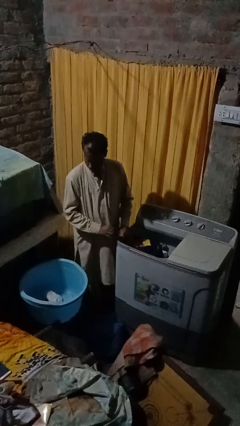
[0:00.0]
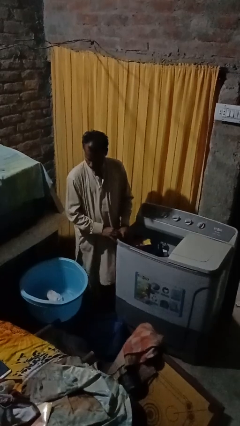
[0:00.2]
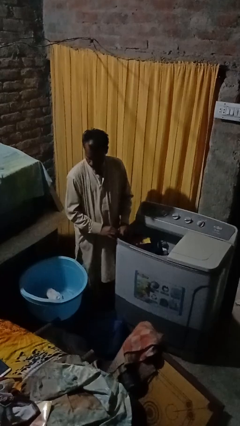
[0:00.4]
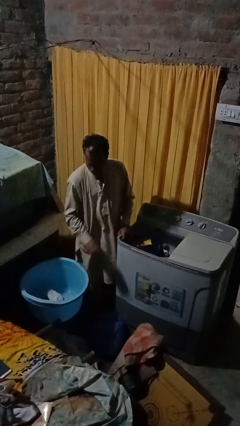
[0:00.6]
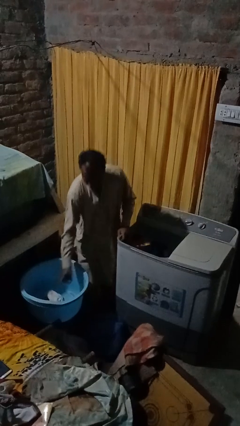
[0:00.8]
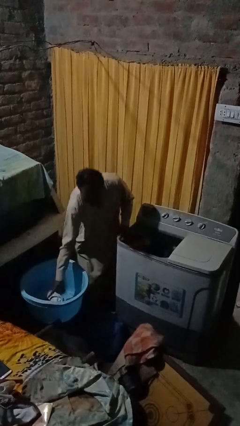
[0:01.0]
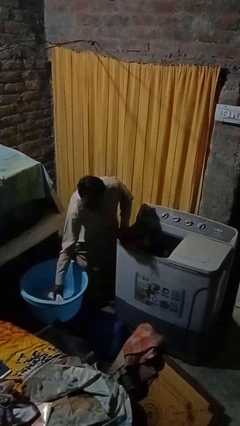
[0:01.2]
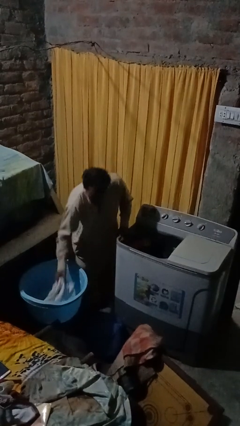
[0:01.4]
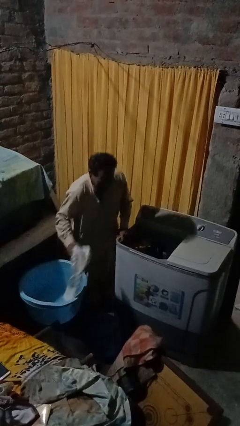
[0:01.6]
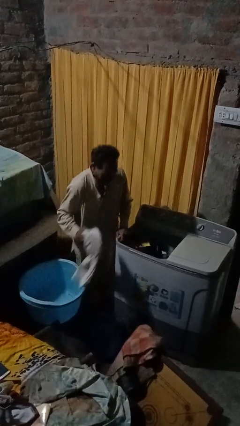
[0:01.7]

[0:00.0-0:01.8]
person loads clotheswasher

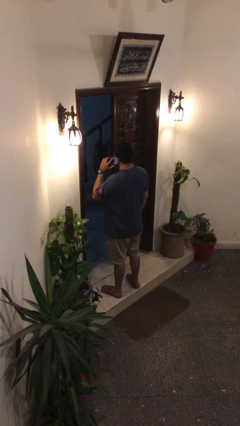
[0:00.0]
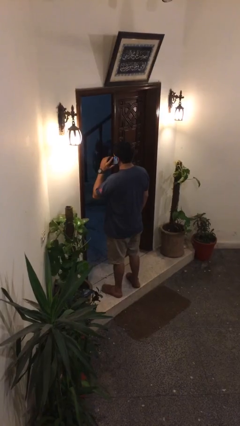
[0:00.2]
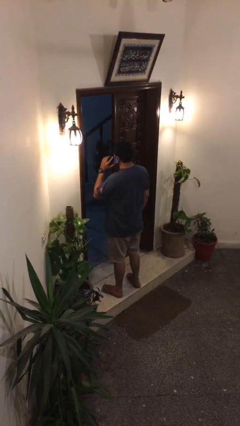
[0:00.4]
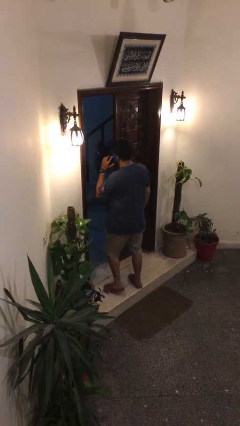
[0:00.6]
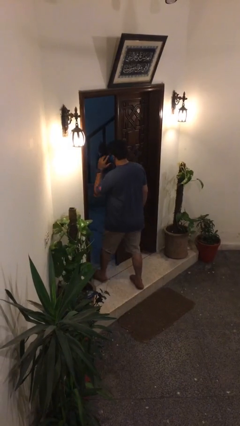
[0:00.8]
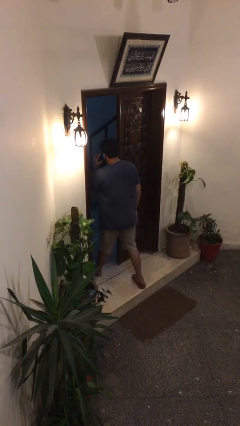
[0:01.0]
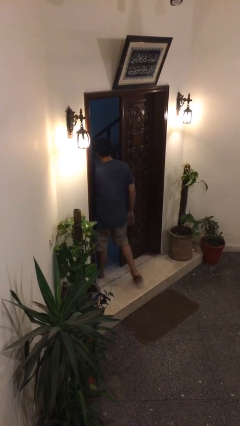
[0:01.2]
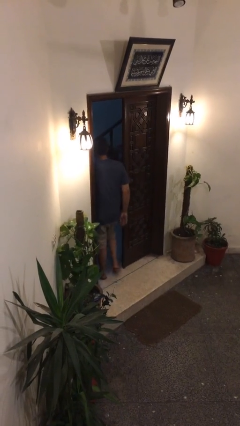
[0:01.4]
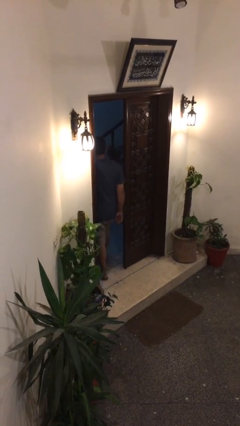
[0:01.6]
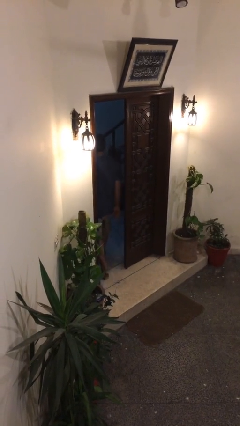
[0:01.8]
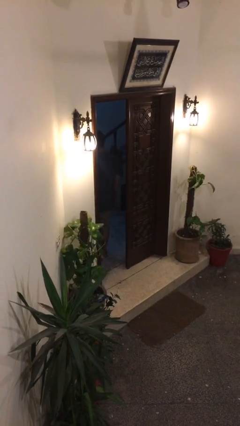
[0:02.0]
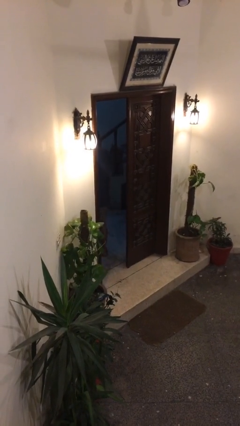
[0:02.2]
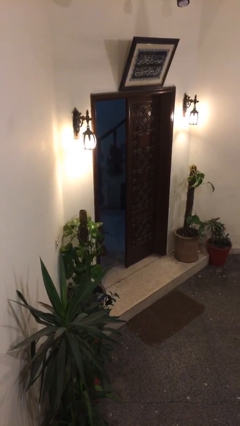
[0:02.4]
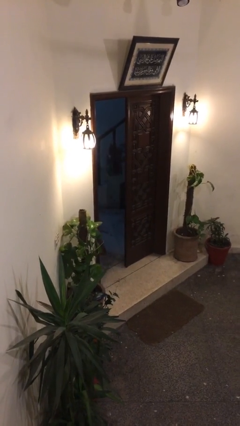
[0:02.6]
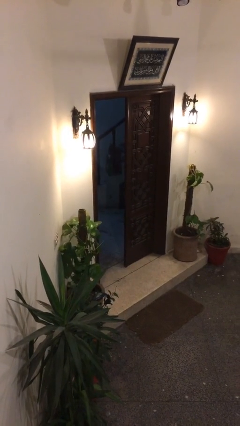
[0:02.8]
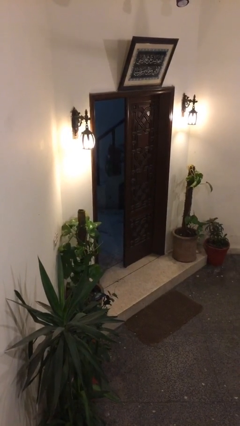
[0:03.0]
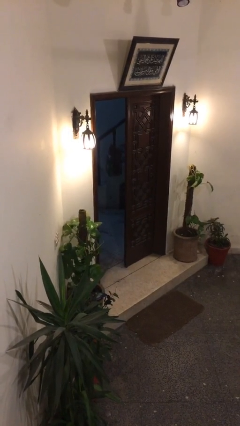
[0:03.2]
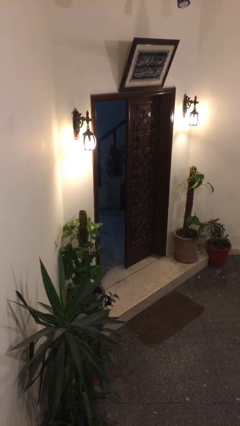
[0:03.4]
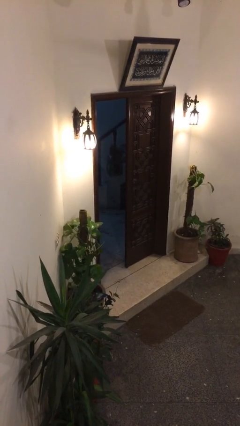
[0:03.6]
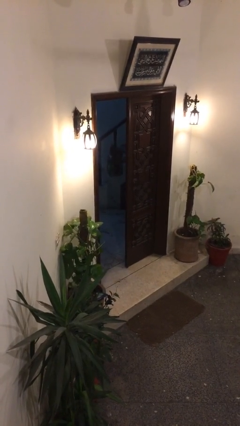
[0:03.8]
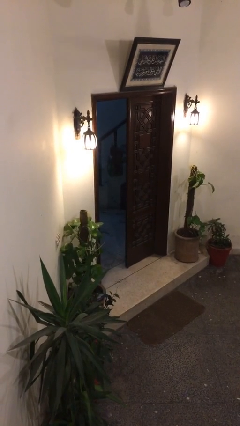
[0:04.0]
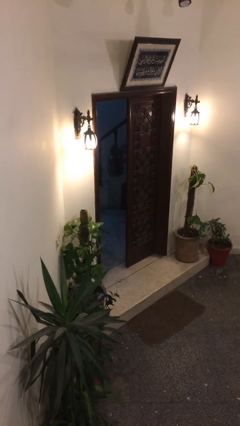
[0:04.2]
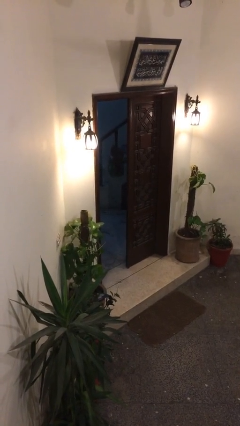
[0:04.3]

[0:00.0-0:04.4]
person exits scene through structure

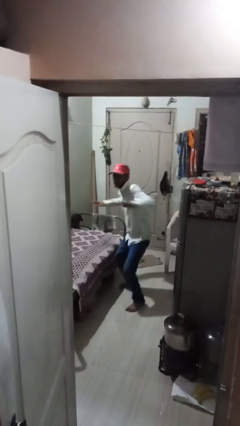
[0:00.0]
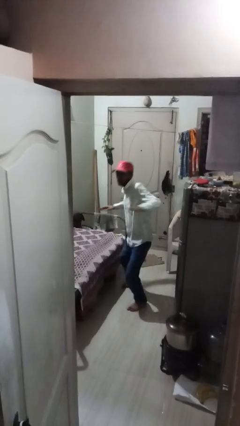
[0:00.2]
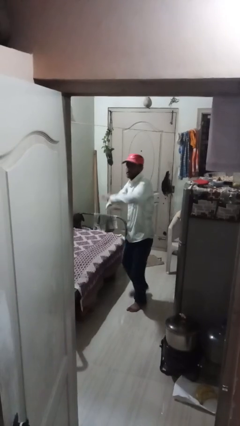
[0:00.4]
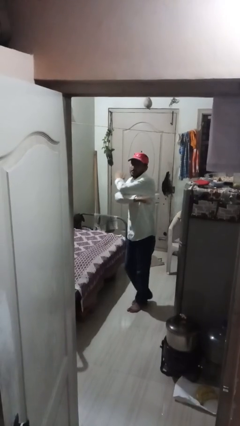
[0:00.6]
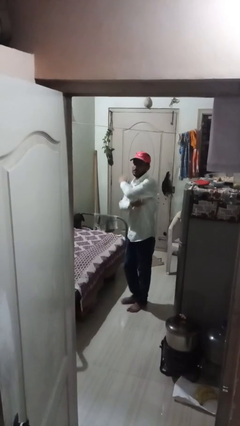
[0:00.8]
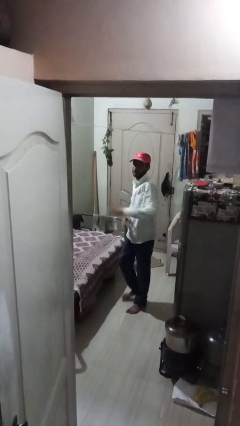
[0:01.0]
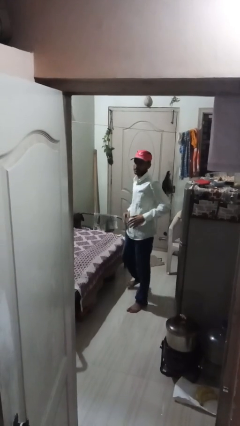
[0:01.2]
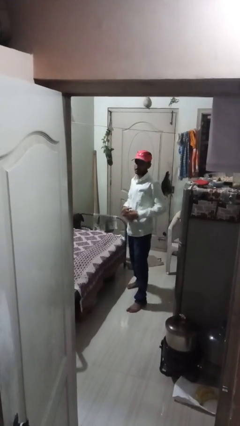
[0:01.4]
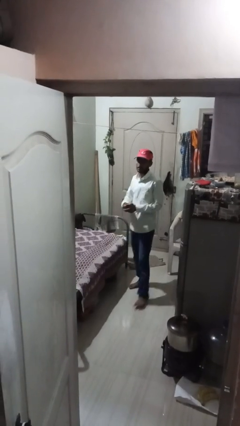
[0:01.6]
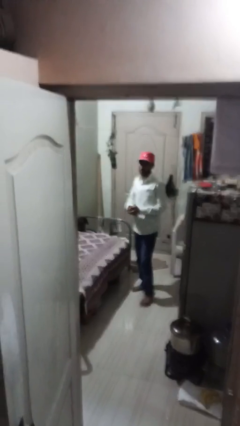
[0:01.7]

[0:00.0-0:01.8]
person karate chop

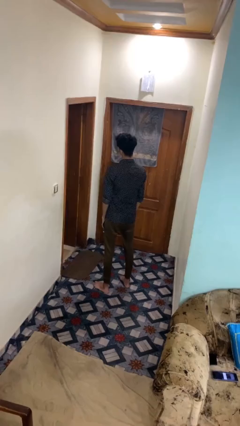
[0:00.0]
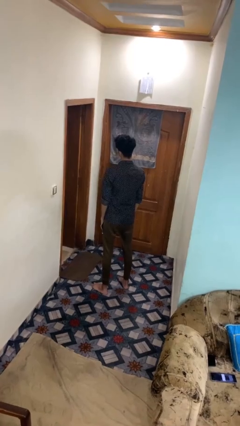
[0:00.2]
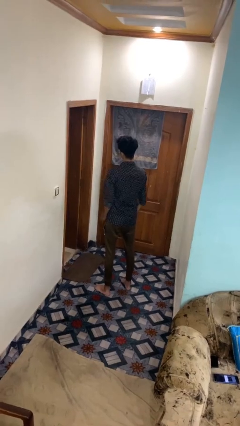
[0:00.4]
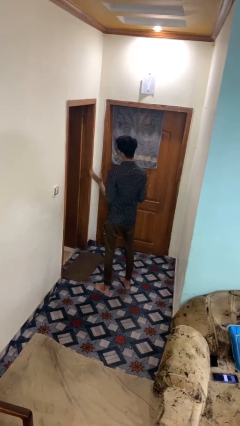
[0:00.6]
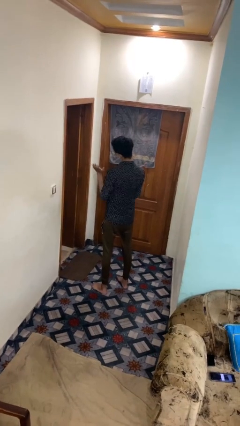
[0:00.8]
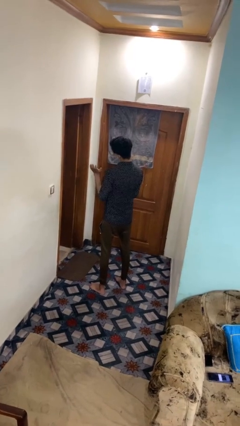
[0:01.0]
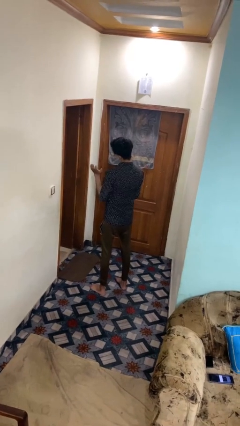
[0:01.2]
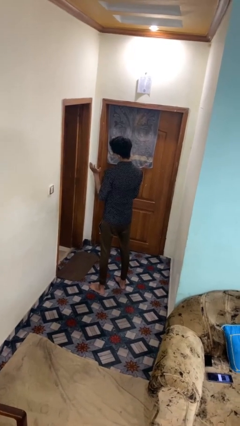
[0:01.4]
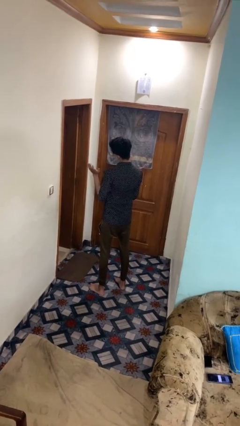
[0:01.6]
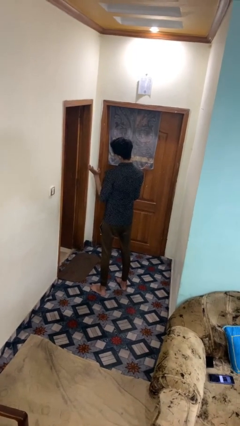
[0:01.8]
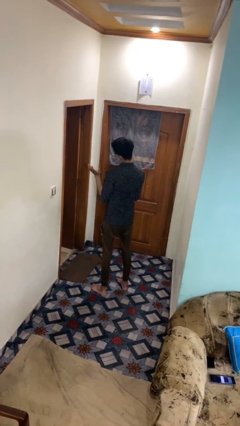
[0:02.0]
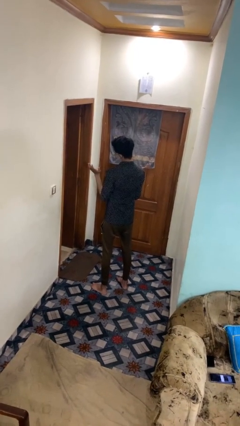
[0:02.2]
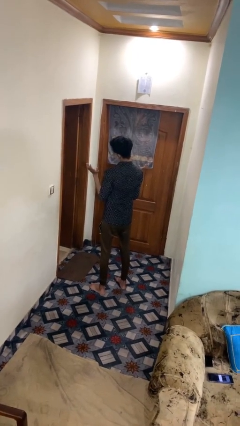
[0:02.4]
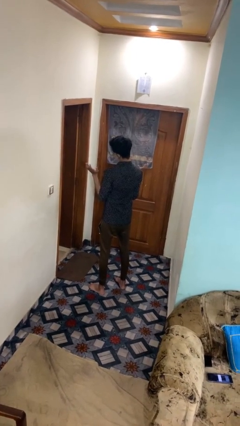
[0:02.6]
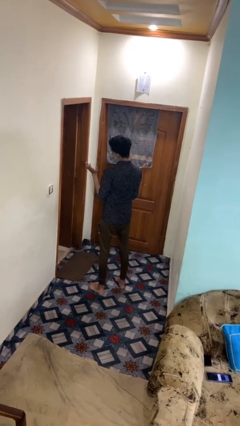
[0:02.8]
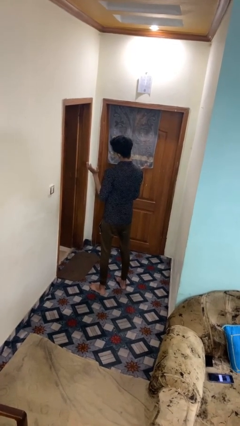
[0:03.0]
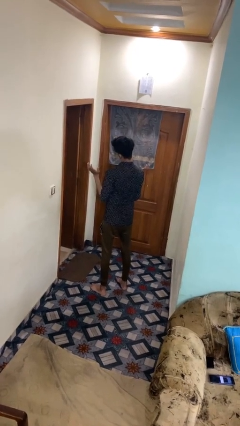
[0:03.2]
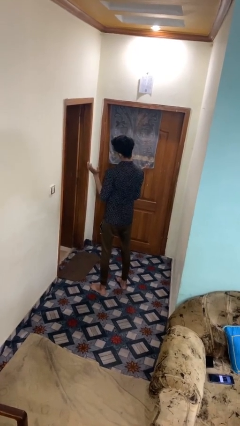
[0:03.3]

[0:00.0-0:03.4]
person shrugs

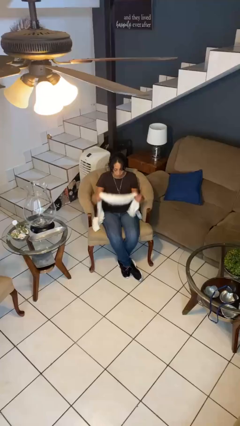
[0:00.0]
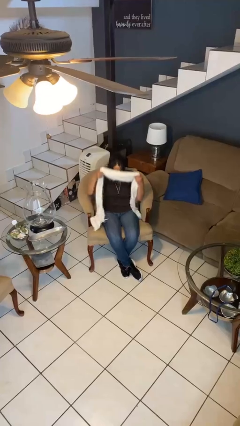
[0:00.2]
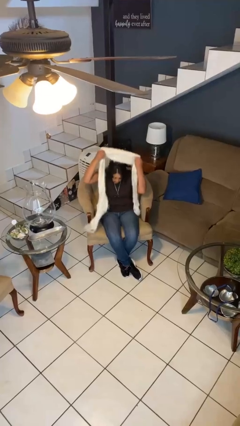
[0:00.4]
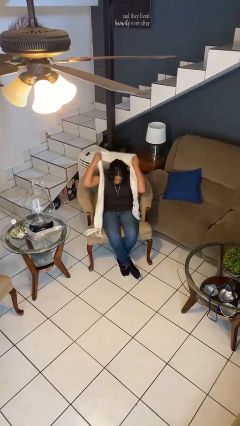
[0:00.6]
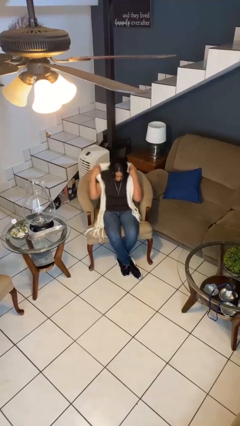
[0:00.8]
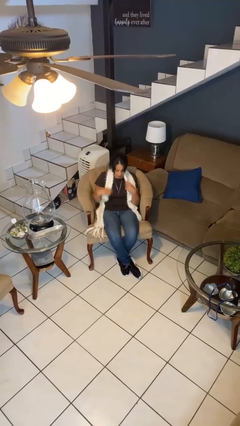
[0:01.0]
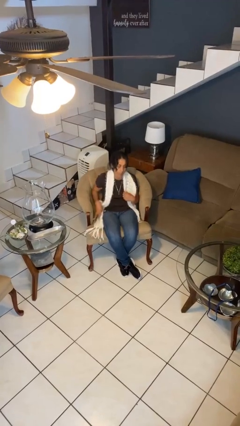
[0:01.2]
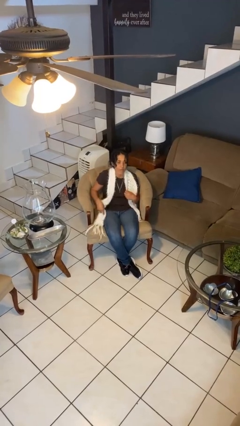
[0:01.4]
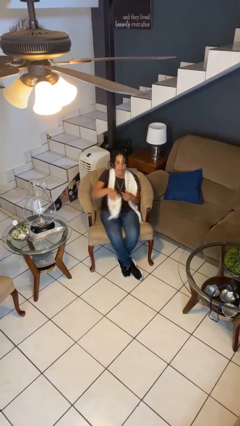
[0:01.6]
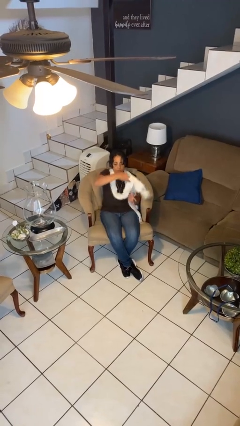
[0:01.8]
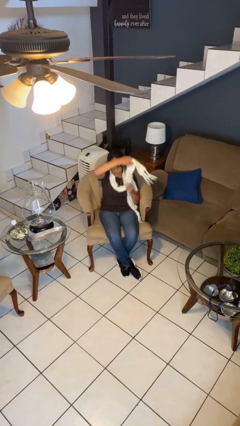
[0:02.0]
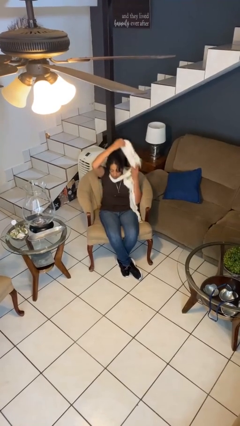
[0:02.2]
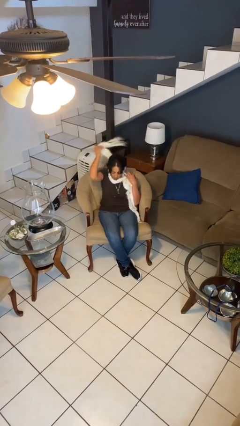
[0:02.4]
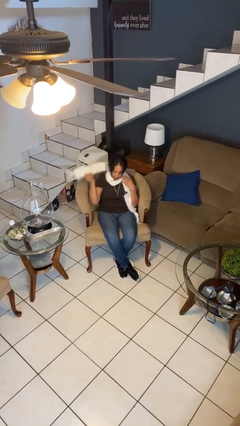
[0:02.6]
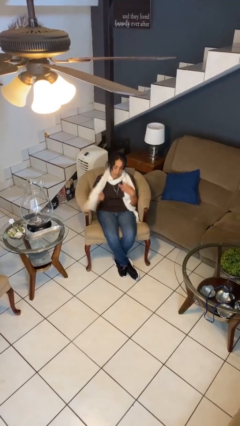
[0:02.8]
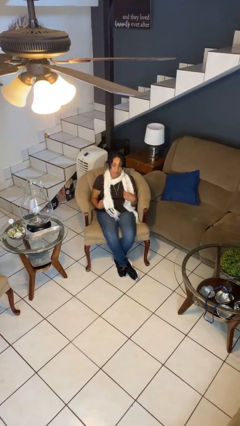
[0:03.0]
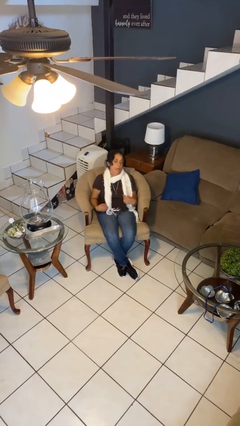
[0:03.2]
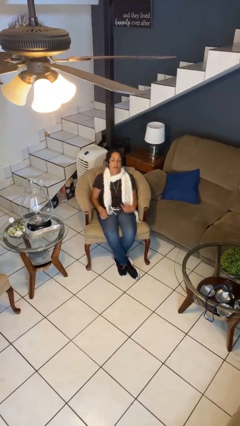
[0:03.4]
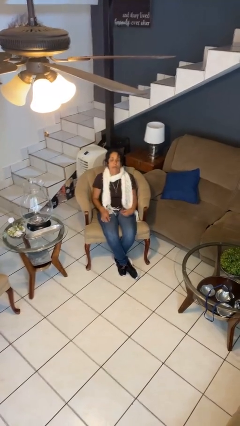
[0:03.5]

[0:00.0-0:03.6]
person puts on scarf

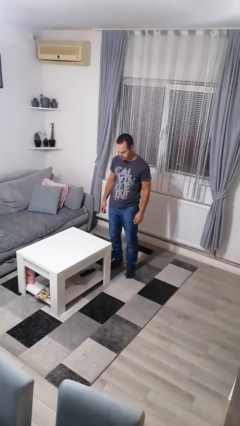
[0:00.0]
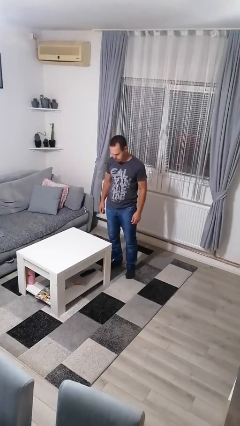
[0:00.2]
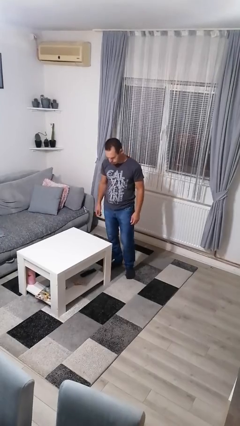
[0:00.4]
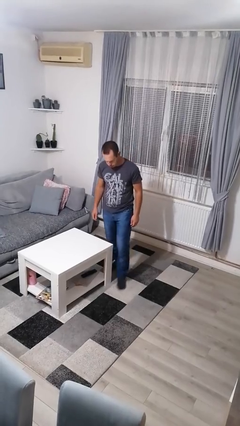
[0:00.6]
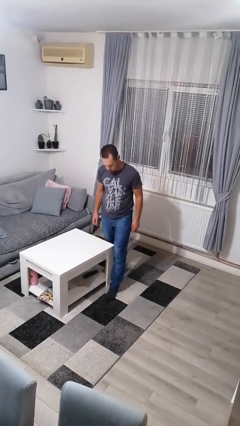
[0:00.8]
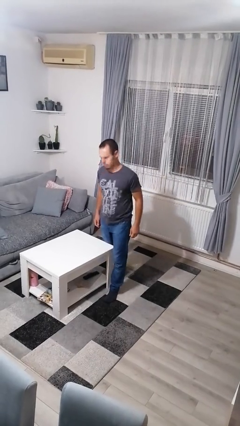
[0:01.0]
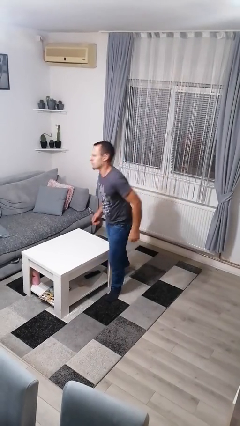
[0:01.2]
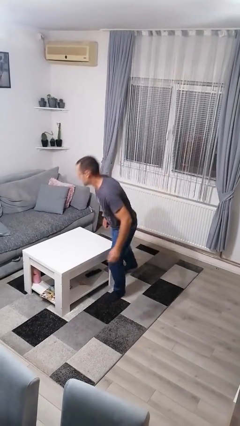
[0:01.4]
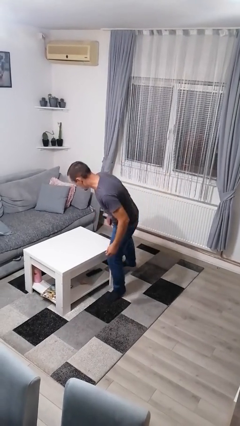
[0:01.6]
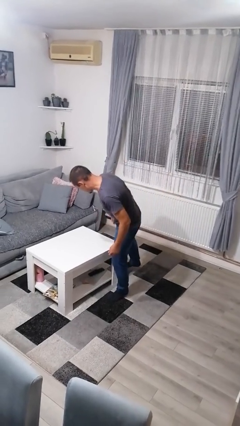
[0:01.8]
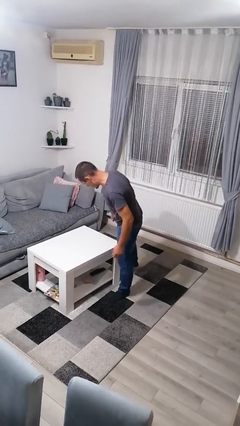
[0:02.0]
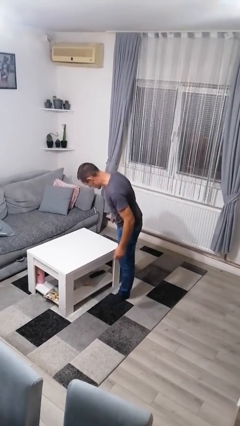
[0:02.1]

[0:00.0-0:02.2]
person bumps into table

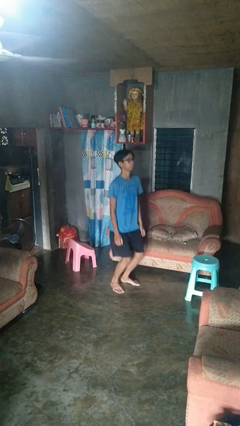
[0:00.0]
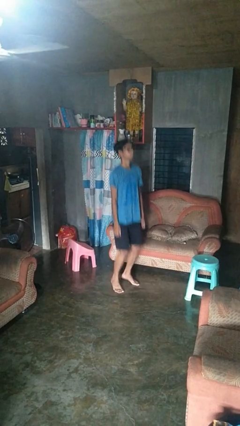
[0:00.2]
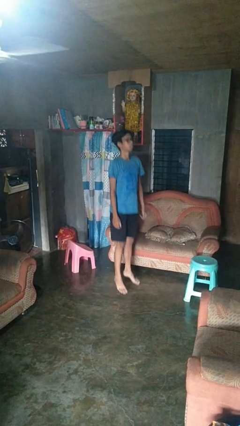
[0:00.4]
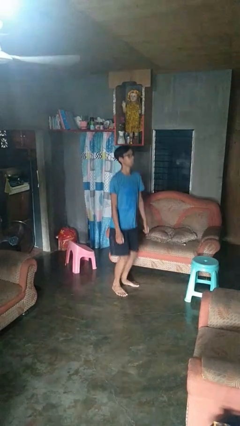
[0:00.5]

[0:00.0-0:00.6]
person jumps
